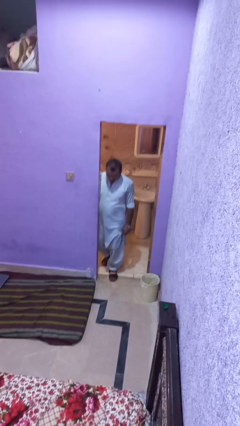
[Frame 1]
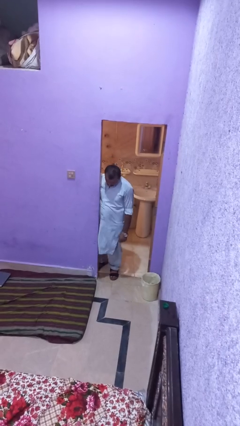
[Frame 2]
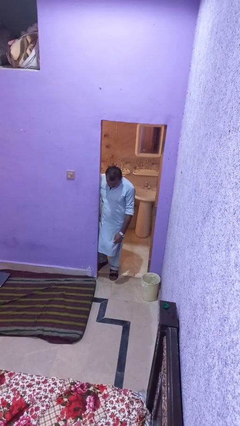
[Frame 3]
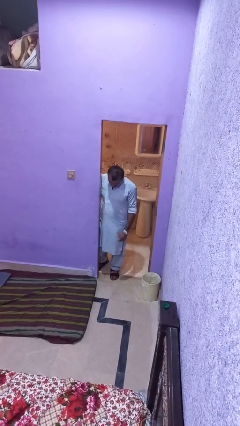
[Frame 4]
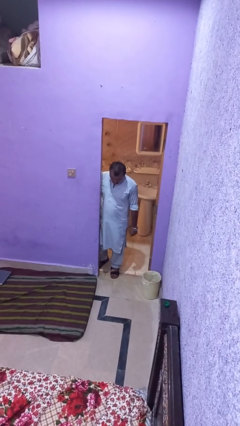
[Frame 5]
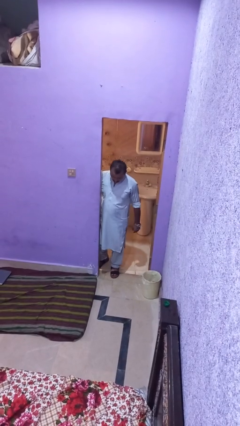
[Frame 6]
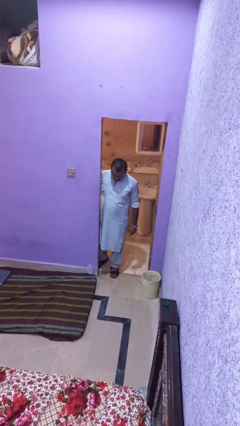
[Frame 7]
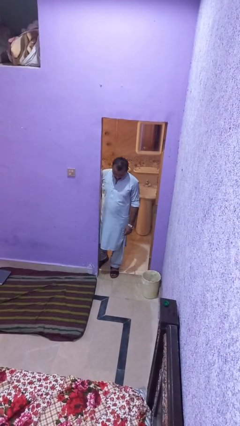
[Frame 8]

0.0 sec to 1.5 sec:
person bumps into wall

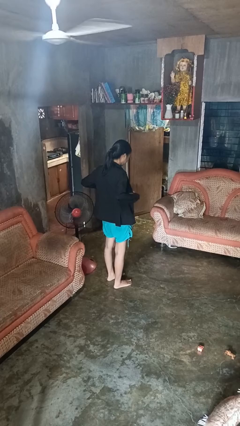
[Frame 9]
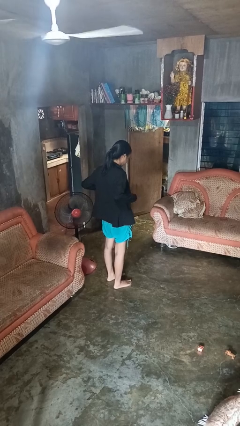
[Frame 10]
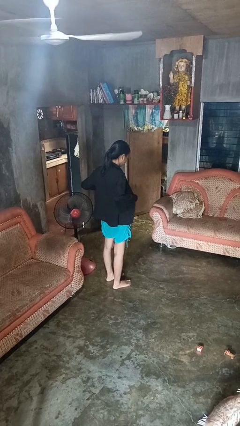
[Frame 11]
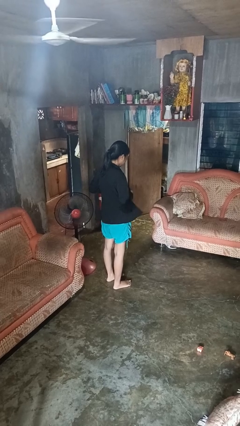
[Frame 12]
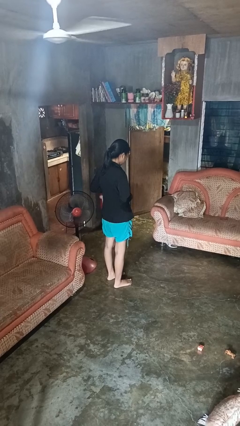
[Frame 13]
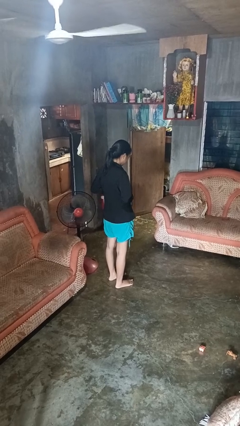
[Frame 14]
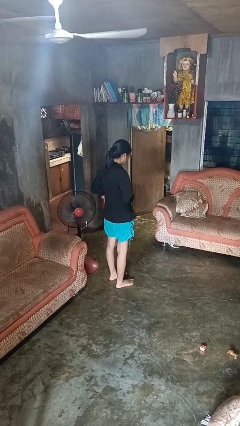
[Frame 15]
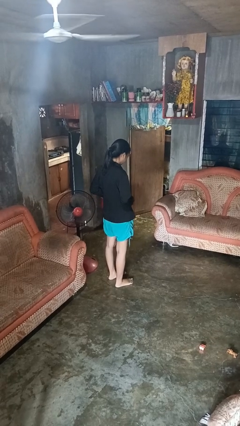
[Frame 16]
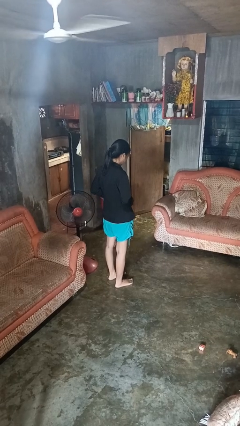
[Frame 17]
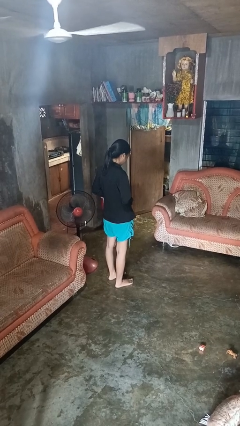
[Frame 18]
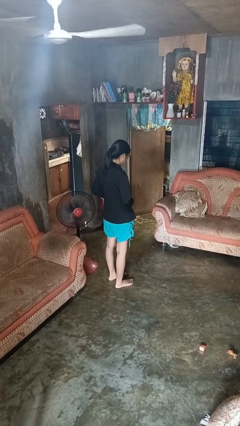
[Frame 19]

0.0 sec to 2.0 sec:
person buttons shirt

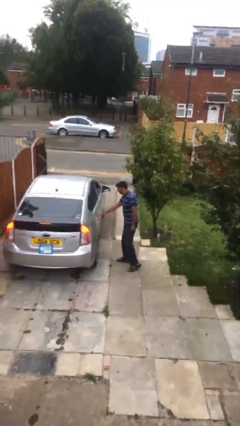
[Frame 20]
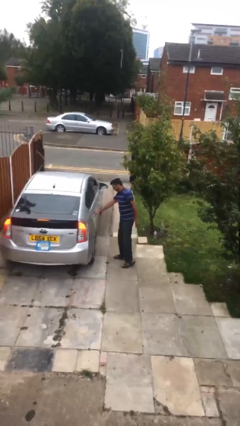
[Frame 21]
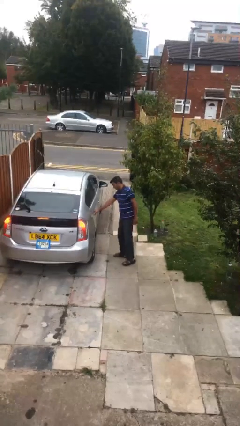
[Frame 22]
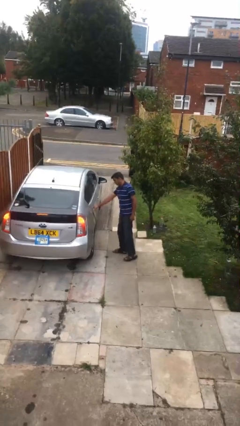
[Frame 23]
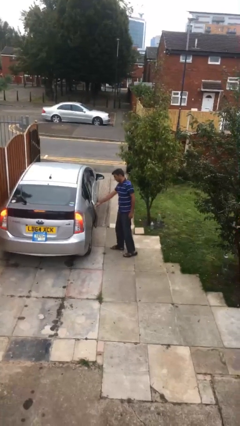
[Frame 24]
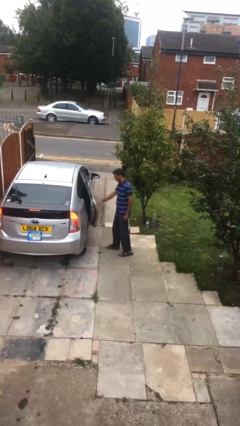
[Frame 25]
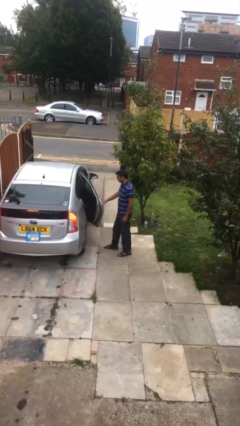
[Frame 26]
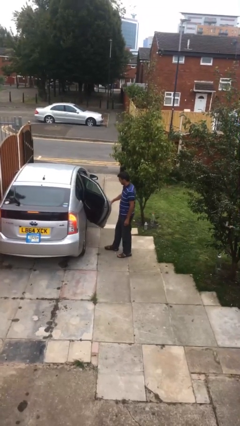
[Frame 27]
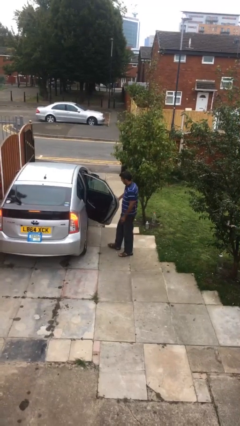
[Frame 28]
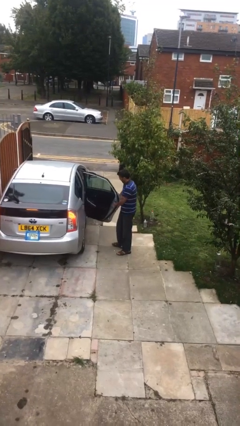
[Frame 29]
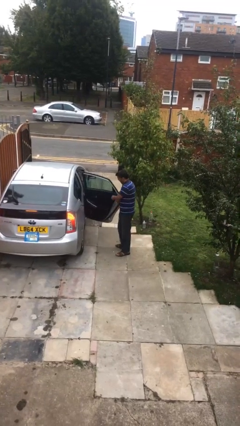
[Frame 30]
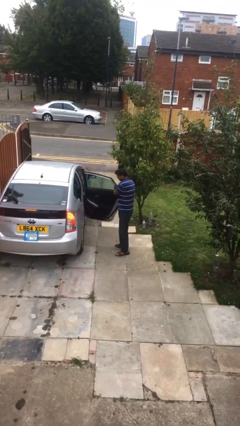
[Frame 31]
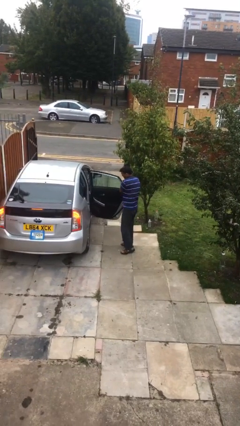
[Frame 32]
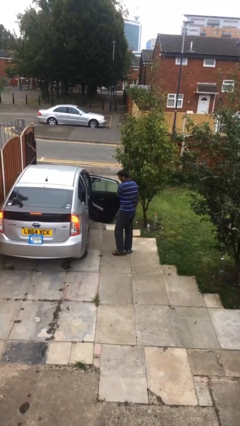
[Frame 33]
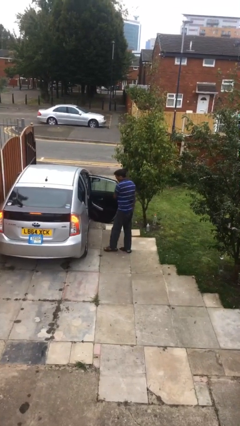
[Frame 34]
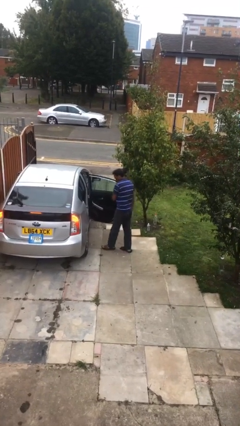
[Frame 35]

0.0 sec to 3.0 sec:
person opens car door

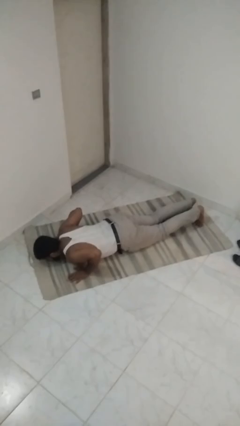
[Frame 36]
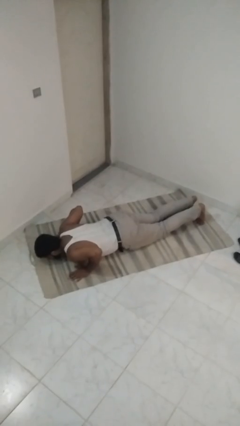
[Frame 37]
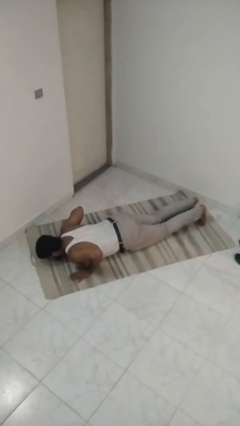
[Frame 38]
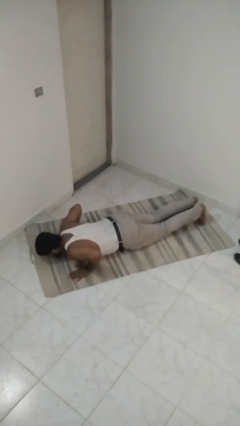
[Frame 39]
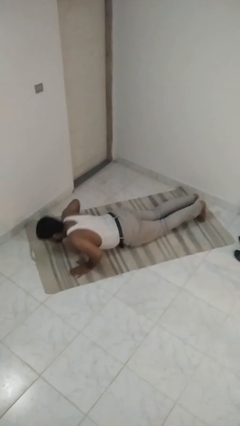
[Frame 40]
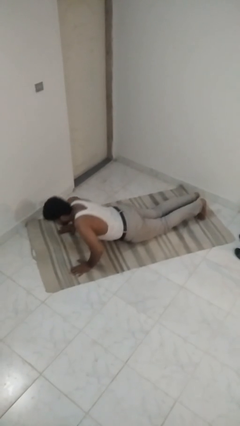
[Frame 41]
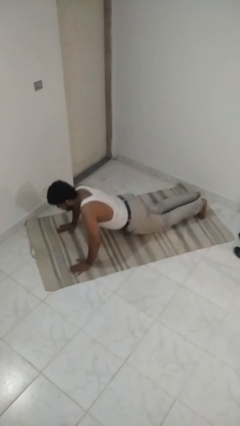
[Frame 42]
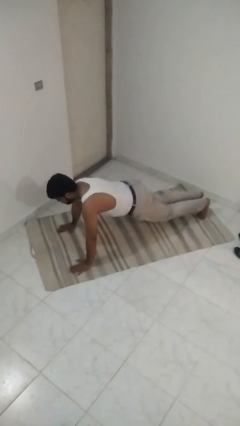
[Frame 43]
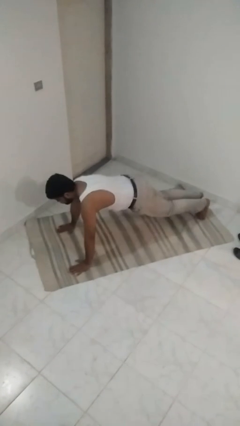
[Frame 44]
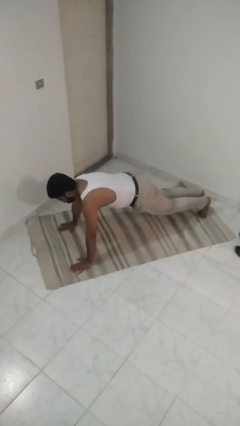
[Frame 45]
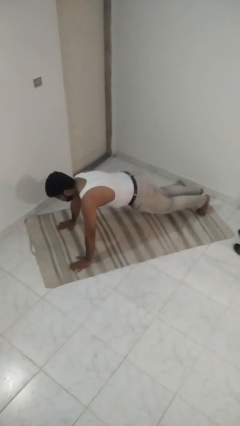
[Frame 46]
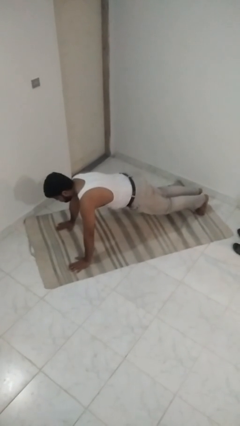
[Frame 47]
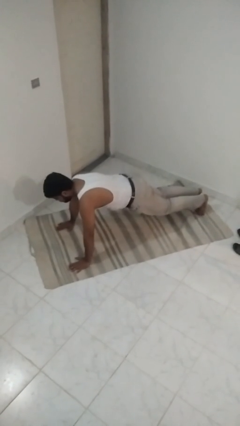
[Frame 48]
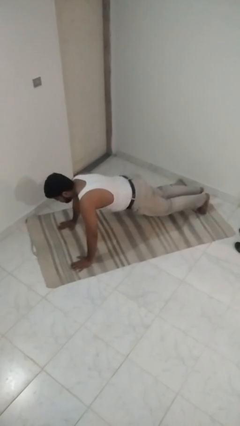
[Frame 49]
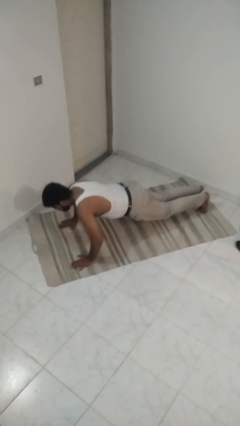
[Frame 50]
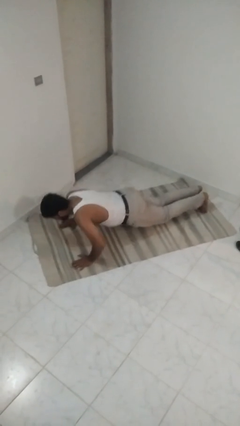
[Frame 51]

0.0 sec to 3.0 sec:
person exercises with pushup

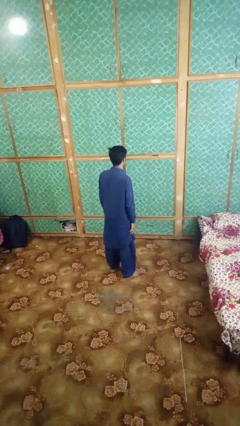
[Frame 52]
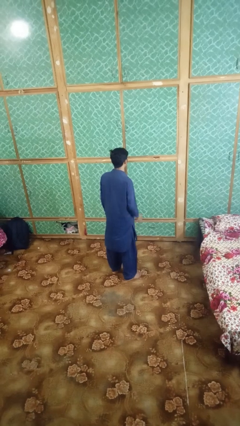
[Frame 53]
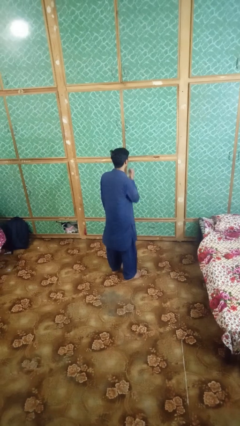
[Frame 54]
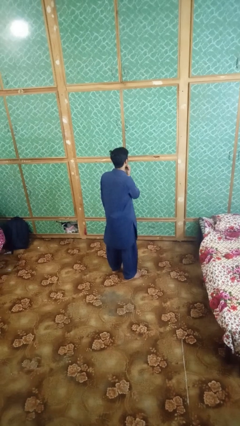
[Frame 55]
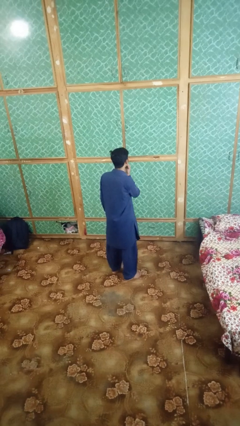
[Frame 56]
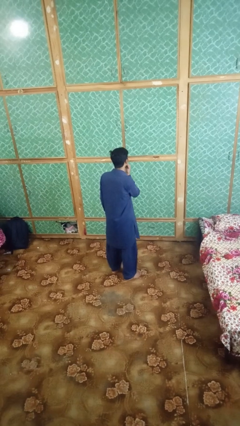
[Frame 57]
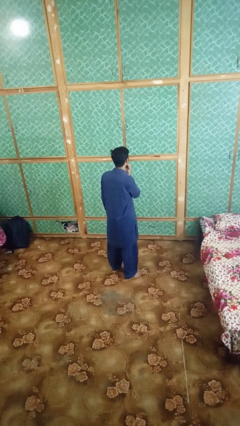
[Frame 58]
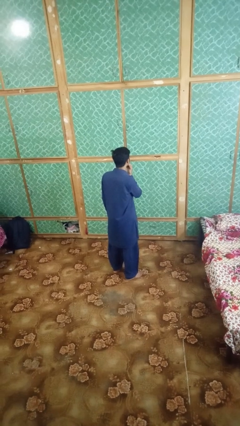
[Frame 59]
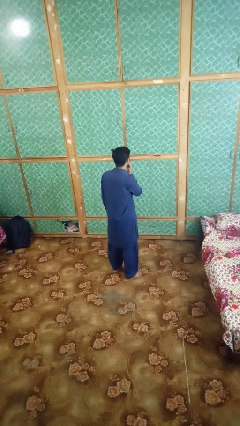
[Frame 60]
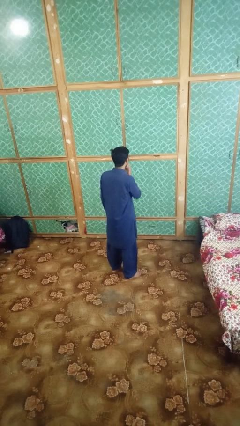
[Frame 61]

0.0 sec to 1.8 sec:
person strokes chin

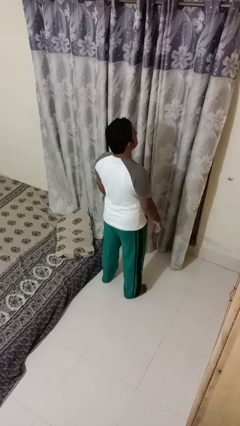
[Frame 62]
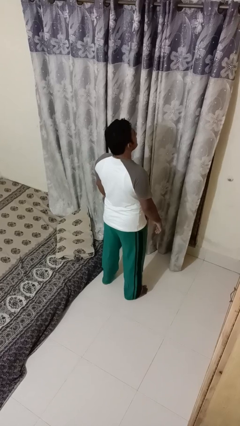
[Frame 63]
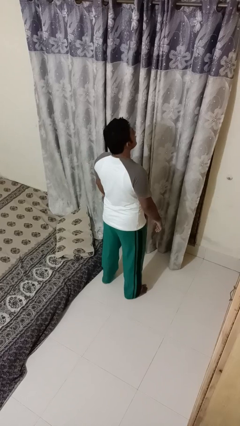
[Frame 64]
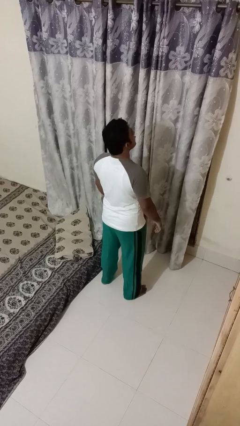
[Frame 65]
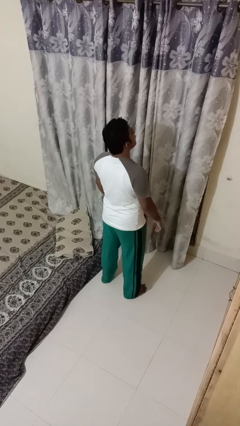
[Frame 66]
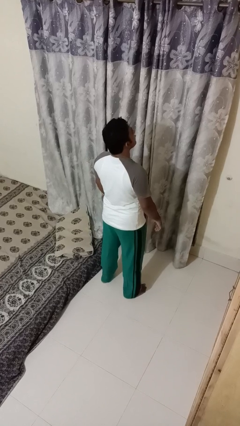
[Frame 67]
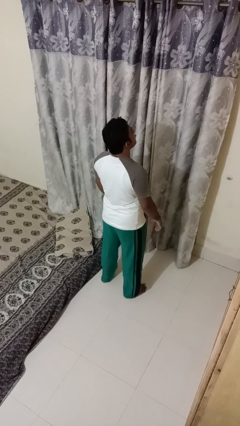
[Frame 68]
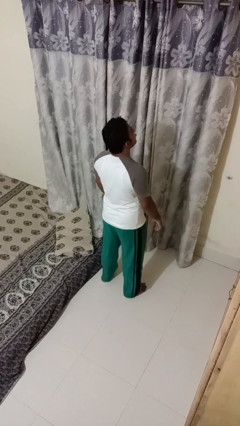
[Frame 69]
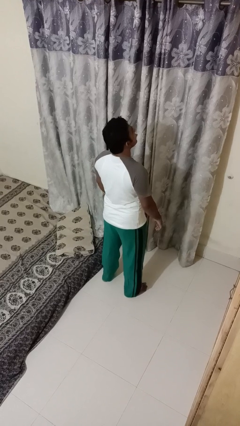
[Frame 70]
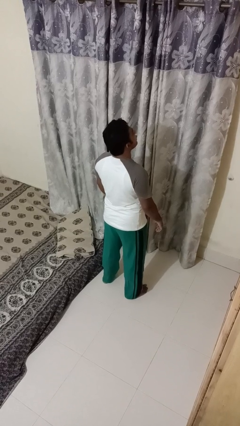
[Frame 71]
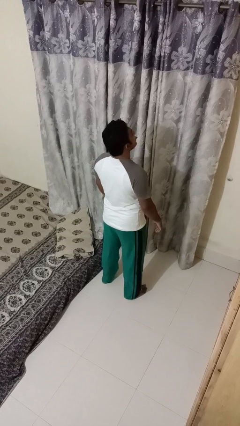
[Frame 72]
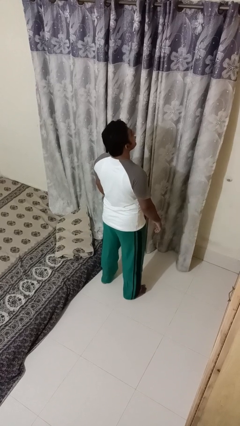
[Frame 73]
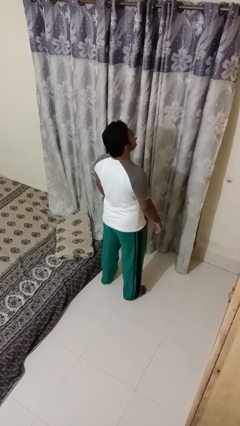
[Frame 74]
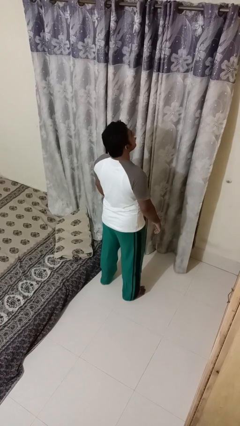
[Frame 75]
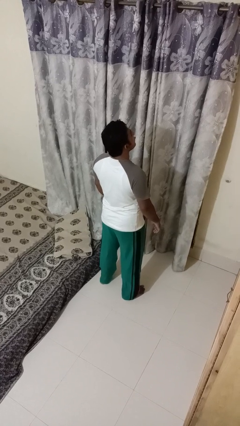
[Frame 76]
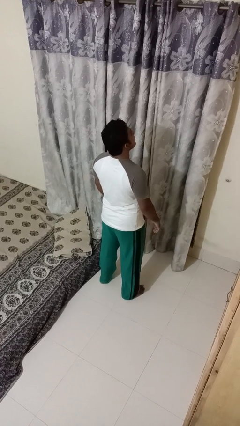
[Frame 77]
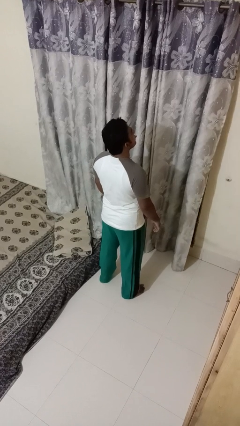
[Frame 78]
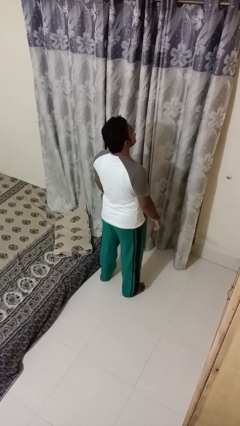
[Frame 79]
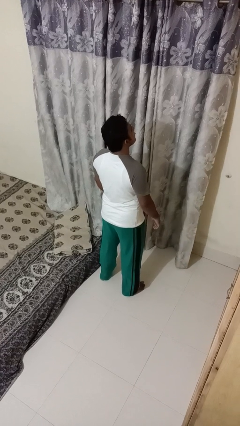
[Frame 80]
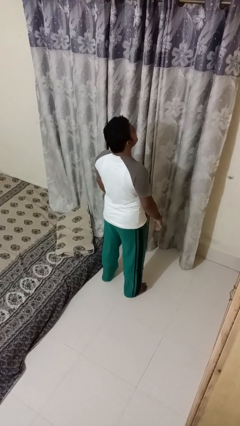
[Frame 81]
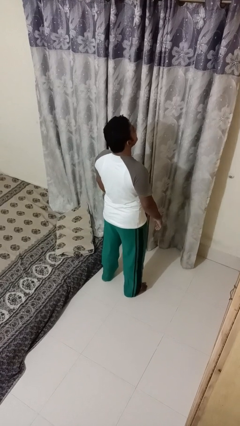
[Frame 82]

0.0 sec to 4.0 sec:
person sticks out tongue

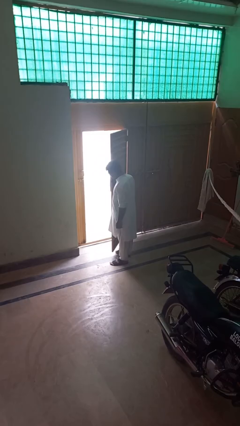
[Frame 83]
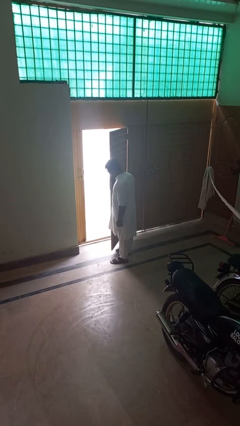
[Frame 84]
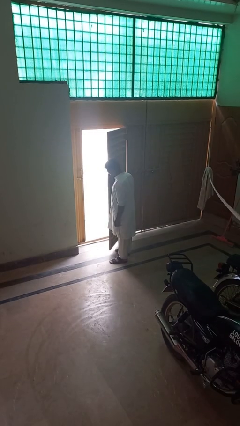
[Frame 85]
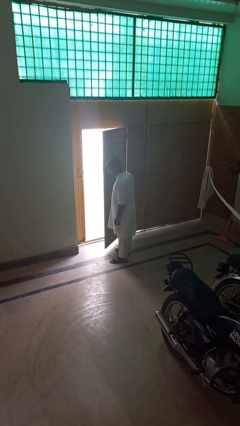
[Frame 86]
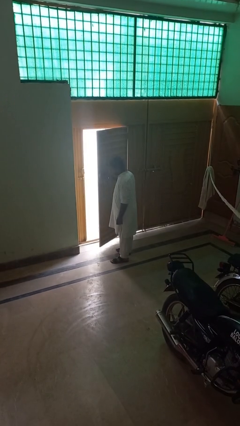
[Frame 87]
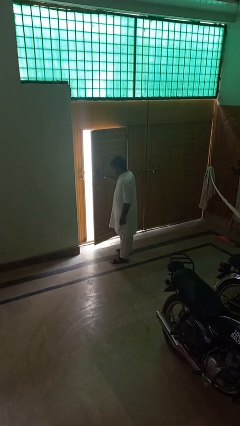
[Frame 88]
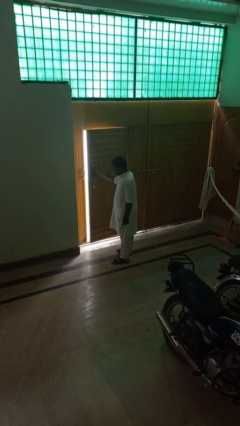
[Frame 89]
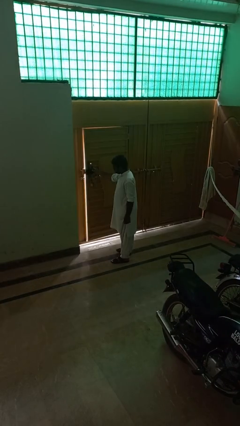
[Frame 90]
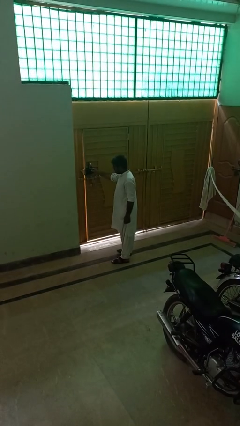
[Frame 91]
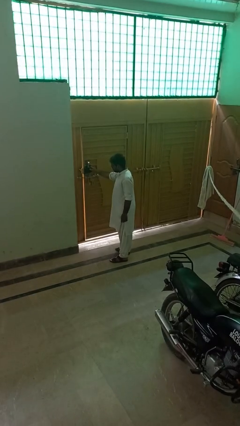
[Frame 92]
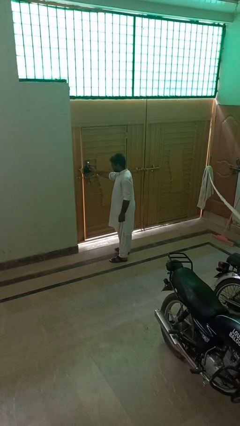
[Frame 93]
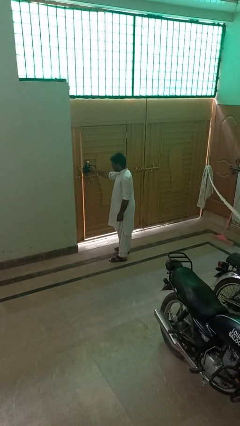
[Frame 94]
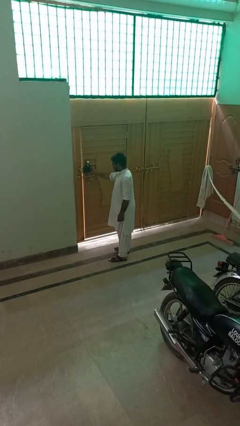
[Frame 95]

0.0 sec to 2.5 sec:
person closes gate
